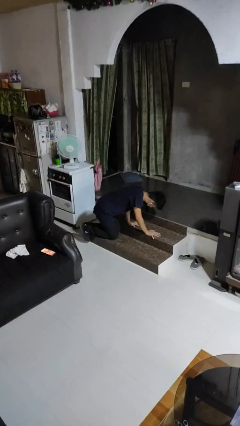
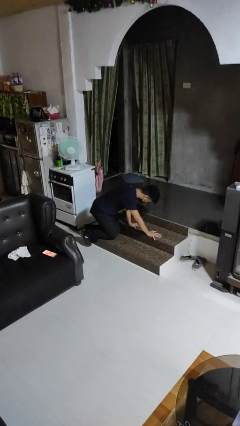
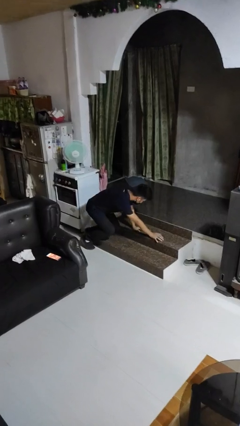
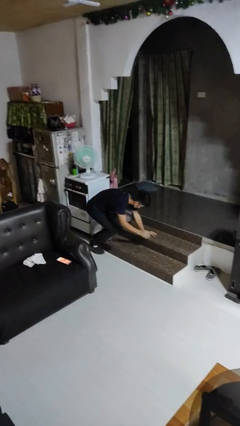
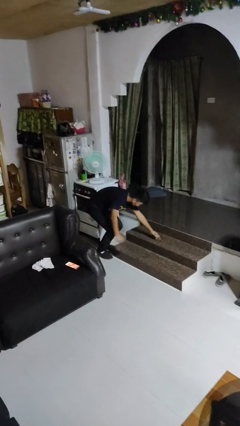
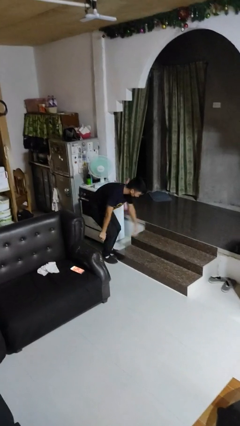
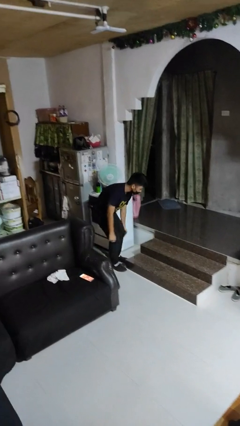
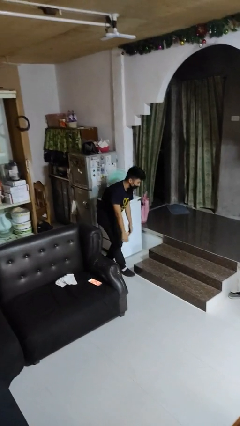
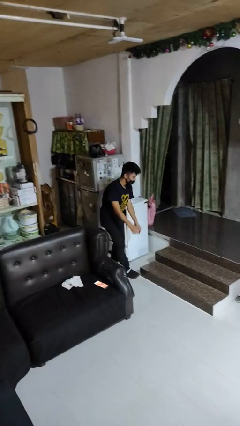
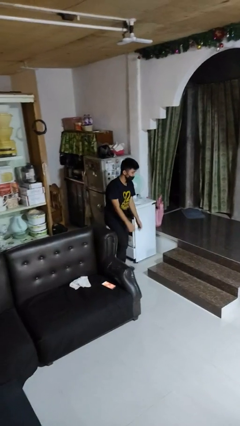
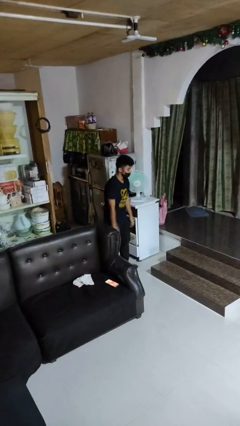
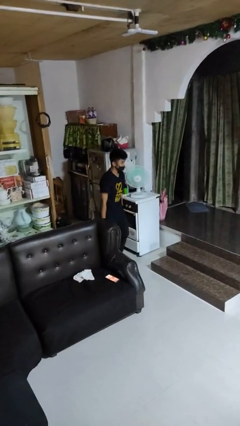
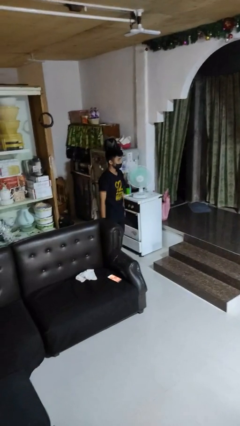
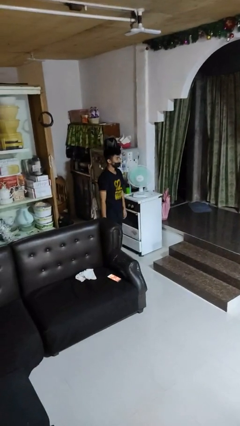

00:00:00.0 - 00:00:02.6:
person stands up from floor

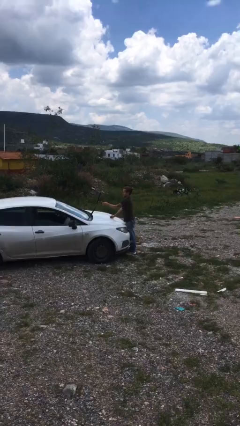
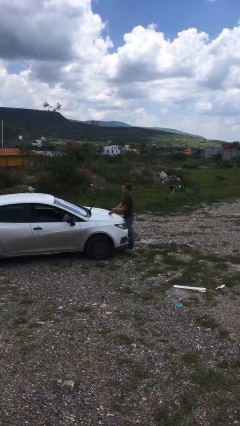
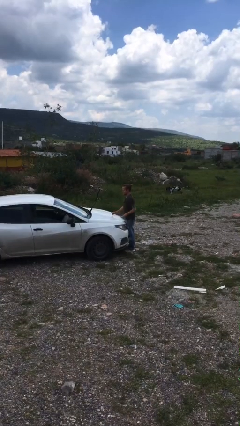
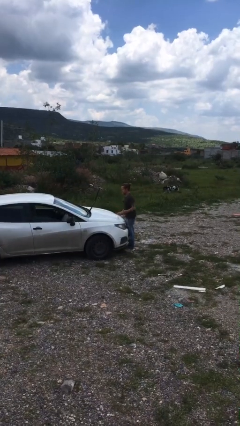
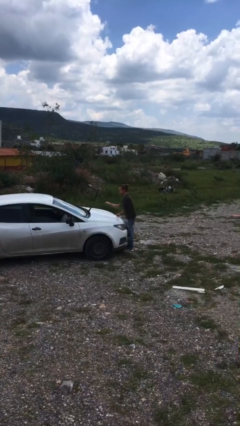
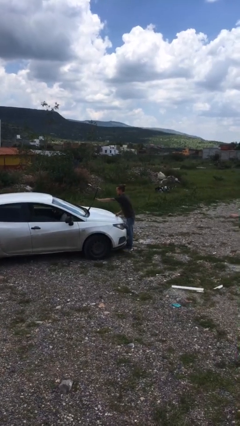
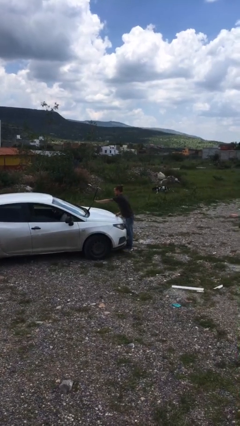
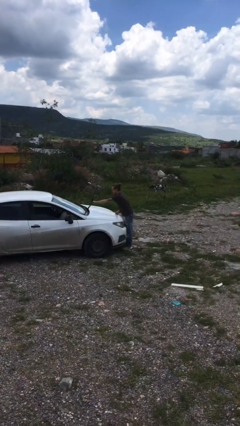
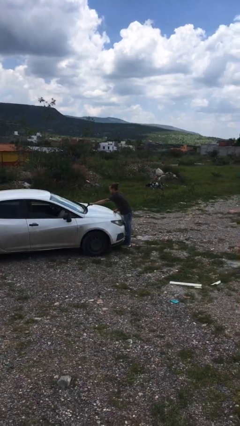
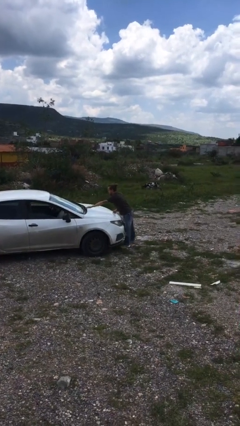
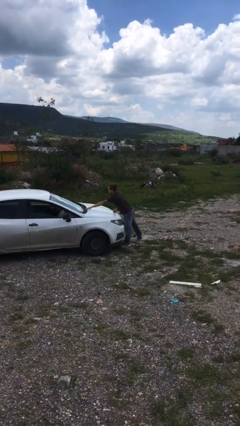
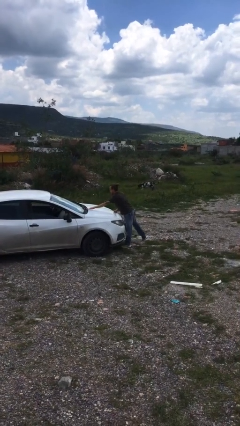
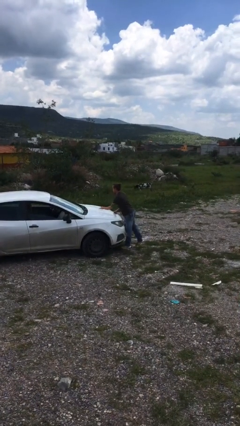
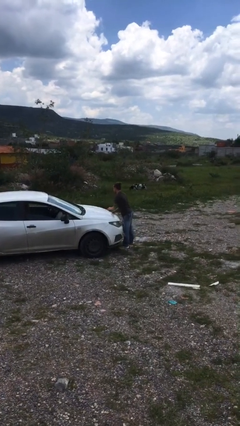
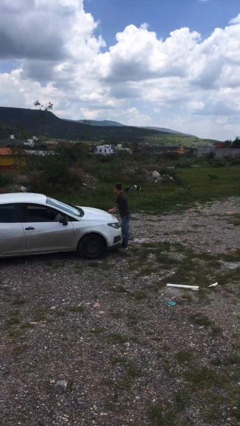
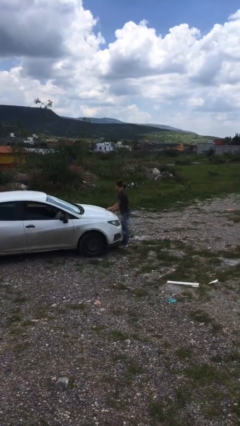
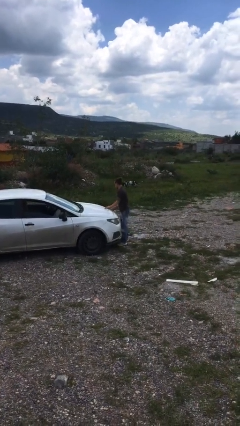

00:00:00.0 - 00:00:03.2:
person flips down car wipers

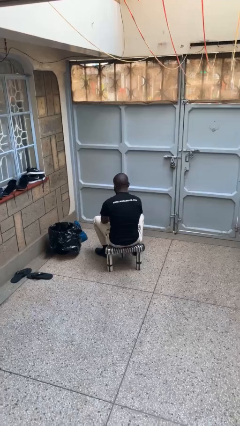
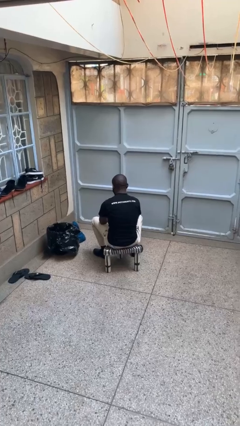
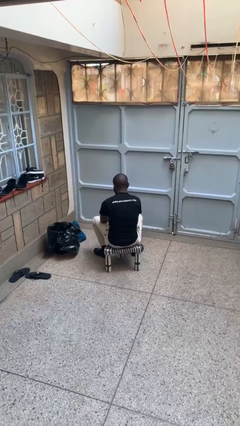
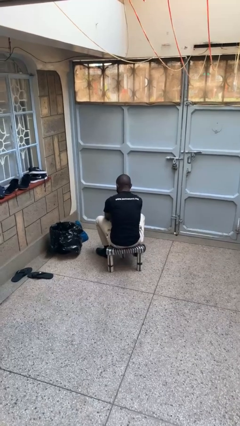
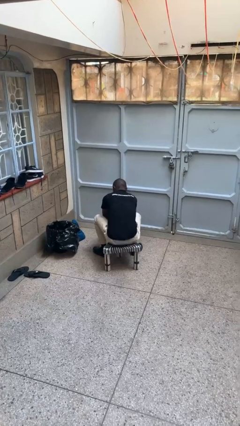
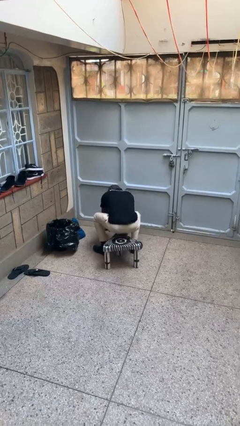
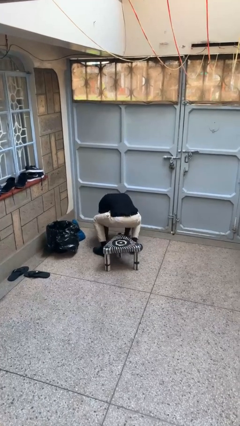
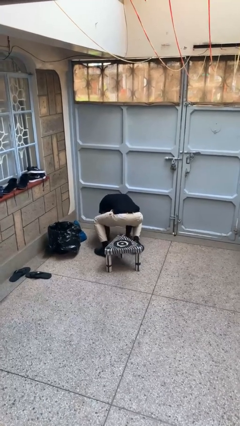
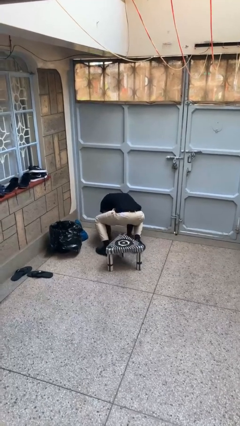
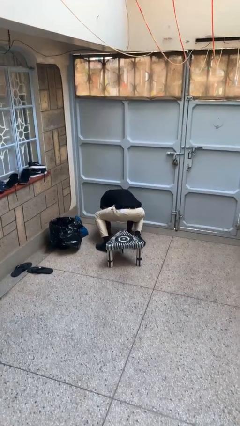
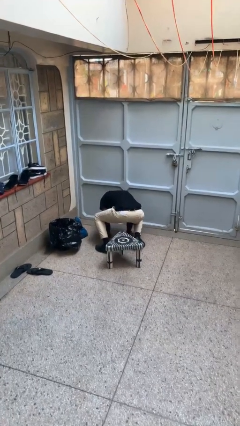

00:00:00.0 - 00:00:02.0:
person falls from chair

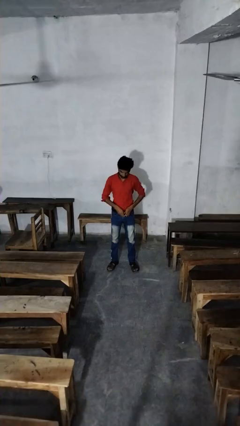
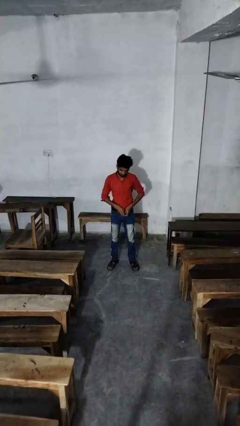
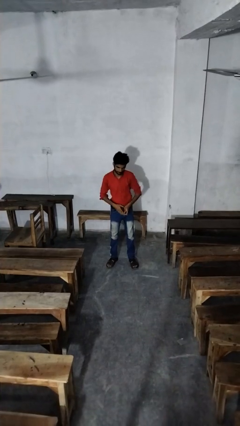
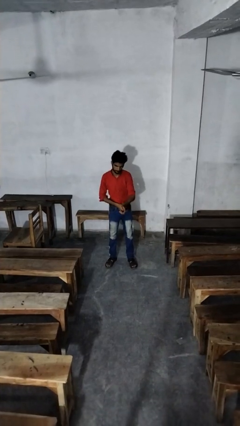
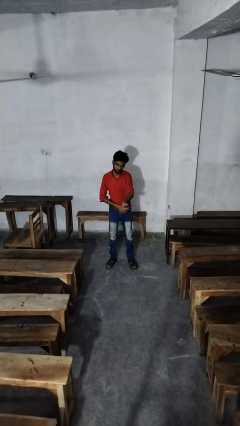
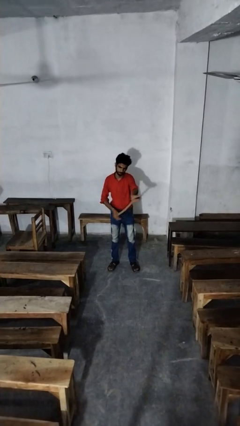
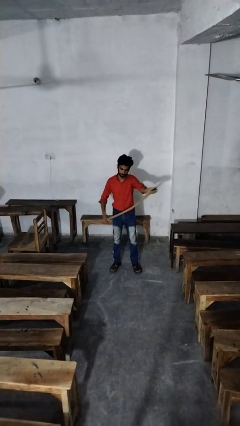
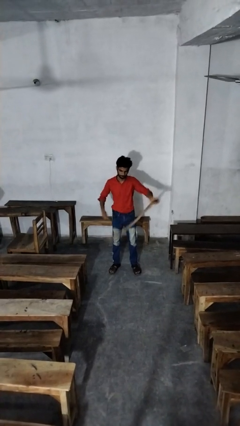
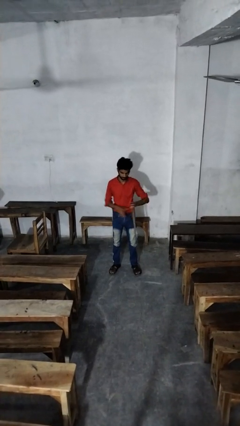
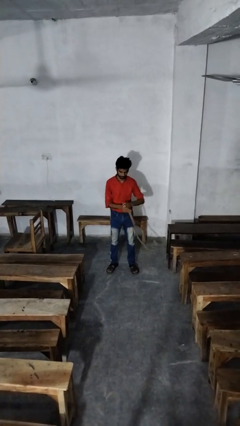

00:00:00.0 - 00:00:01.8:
person takes off belt

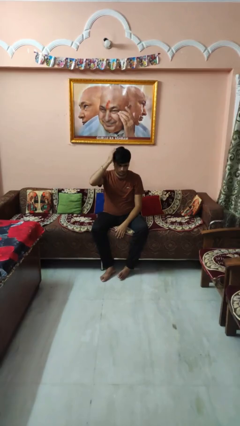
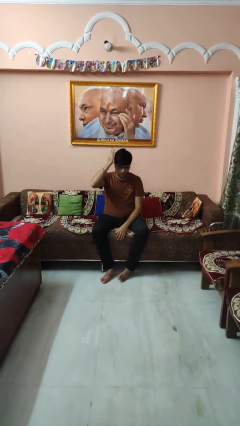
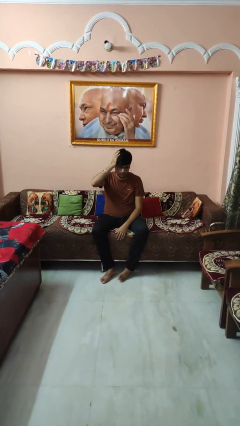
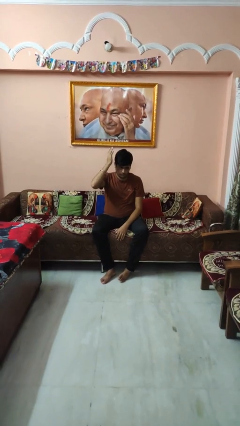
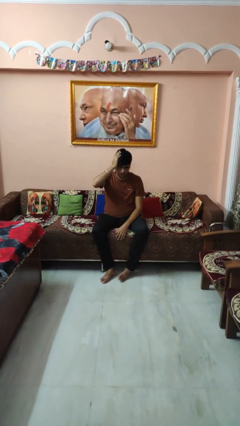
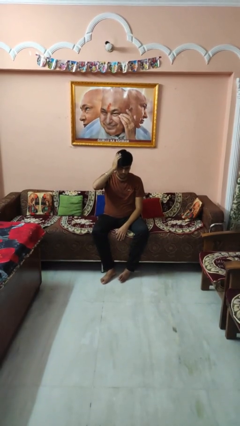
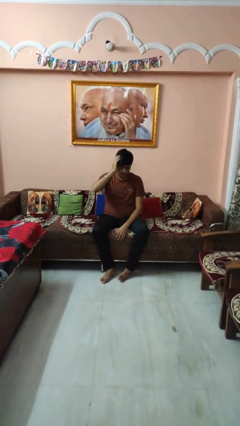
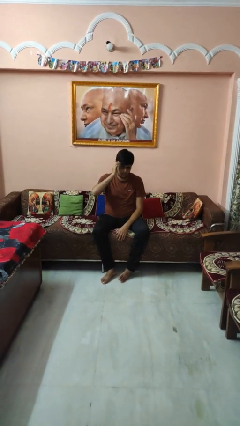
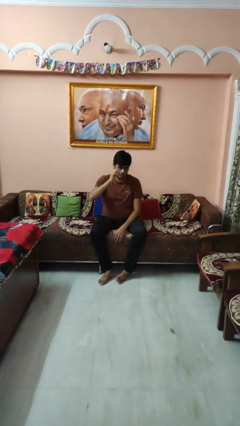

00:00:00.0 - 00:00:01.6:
person pats head

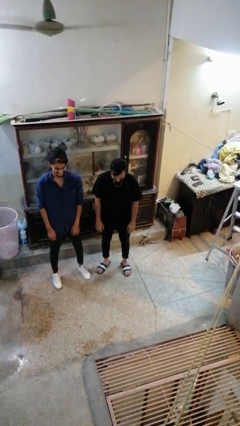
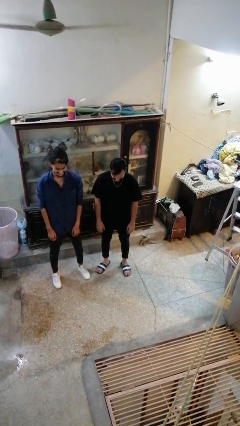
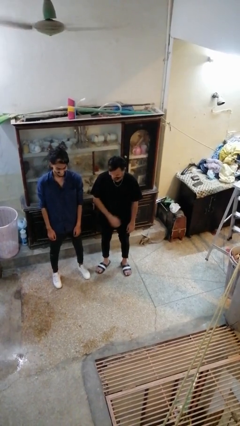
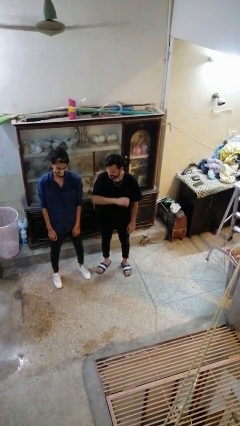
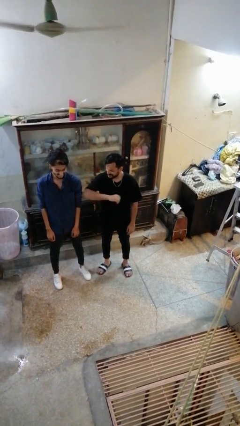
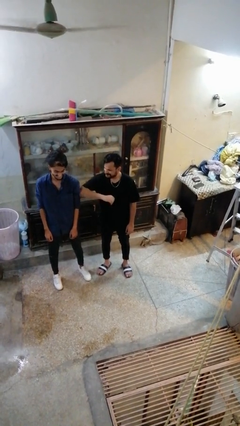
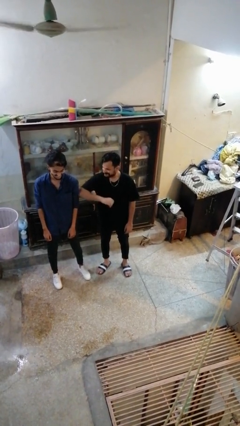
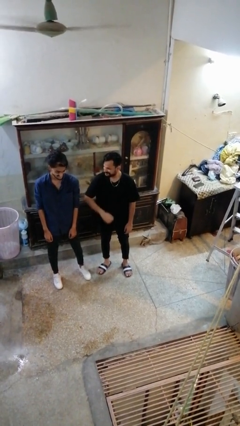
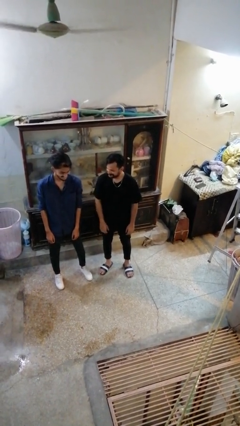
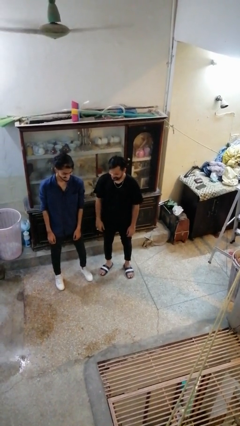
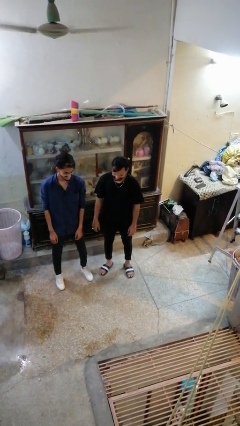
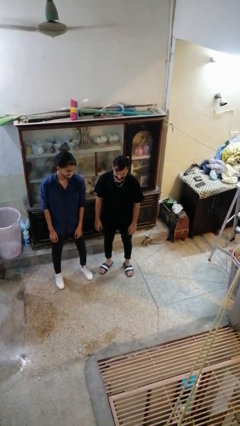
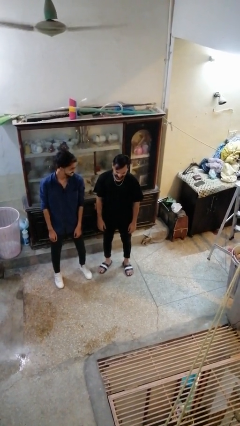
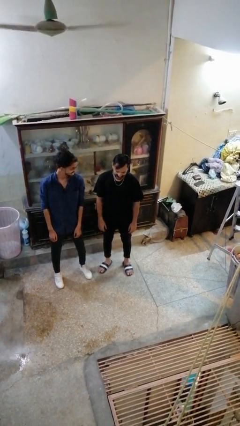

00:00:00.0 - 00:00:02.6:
person nudges person with elbow

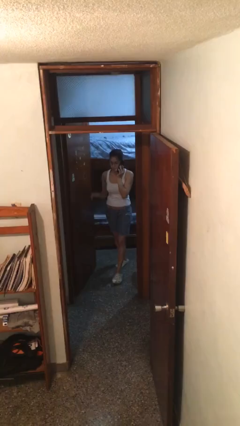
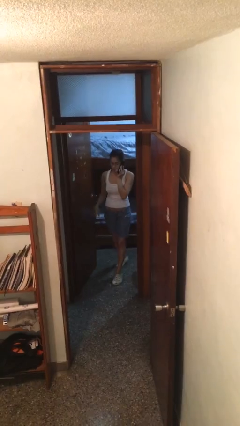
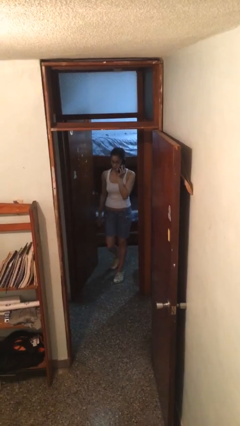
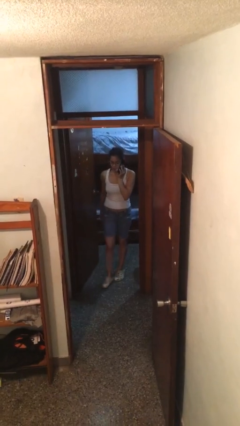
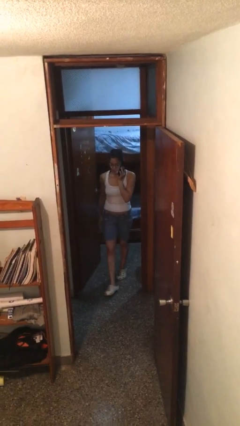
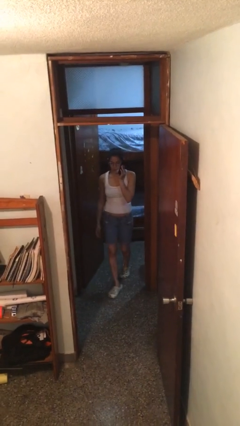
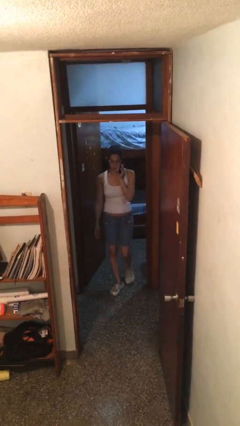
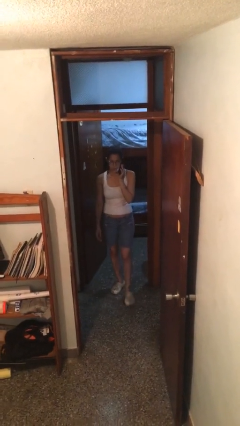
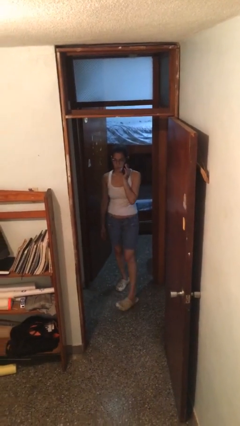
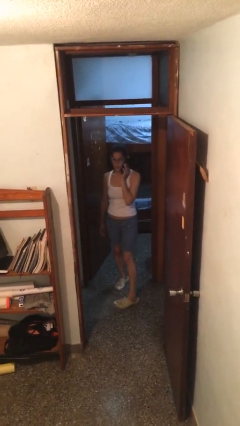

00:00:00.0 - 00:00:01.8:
person enters scene through structure

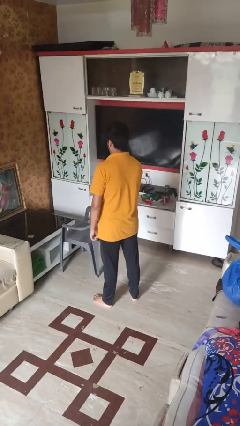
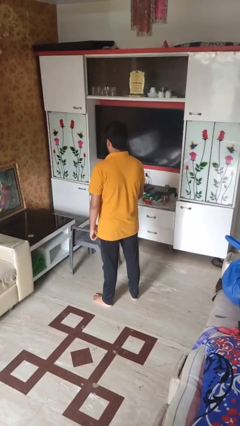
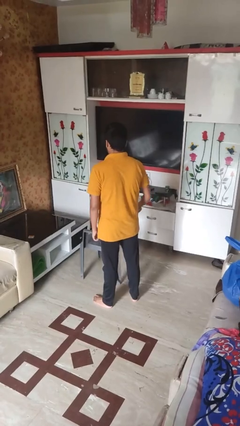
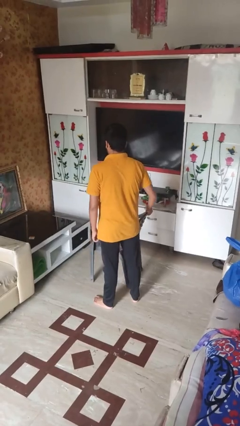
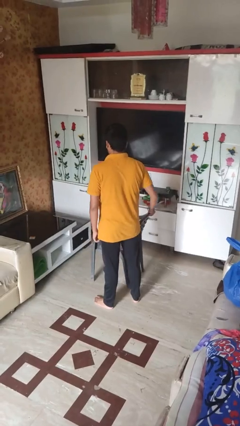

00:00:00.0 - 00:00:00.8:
person pulls out chair

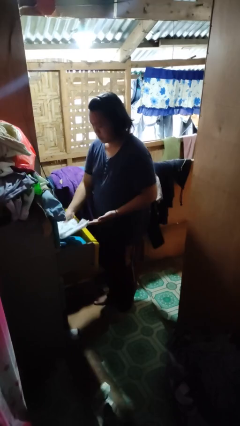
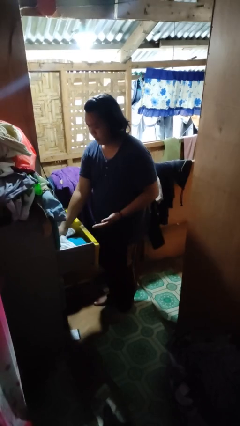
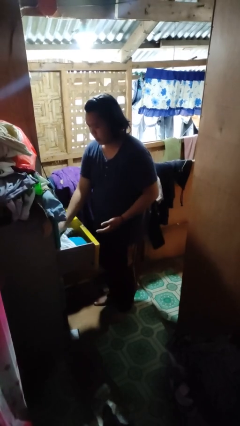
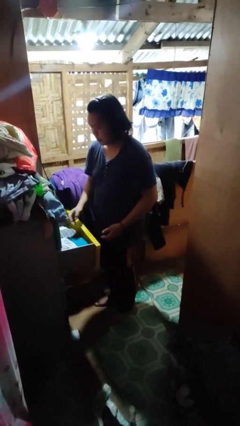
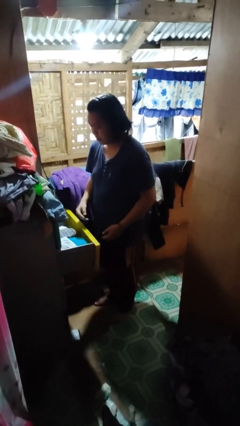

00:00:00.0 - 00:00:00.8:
person puts clothes into dresser
